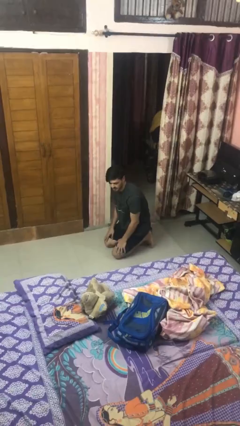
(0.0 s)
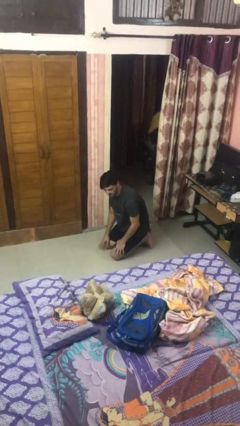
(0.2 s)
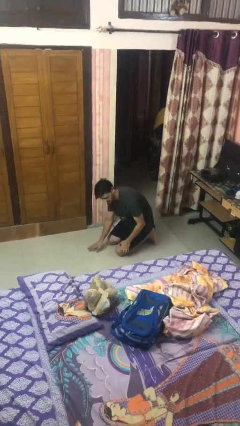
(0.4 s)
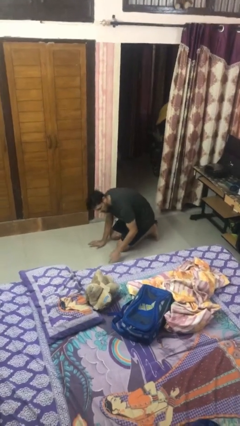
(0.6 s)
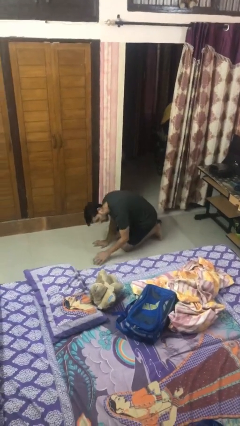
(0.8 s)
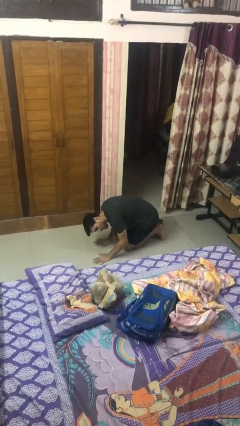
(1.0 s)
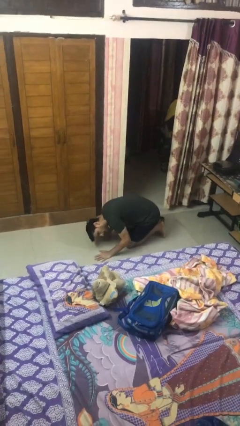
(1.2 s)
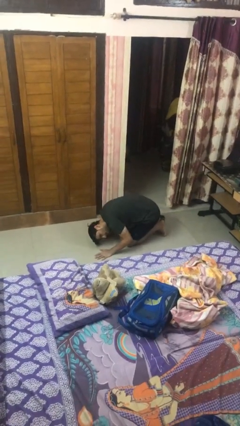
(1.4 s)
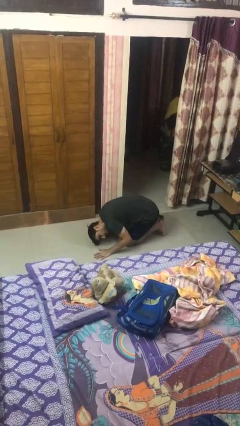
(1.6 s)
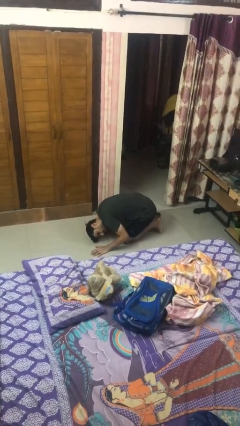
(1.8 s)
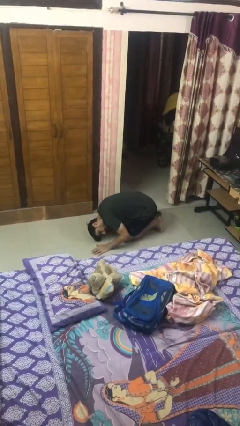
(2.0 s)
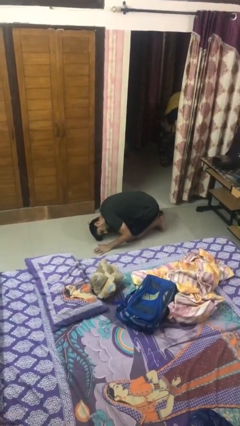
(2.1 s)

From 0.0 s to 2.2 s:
person searches under bed

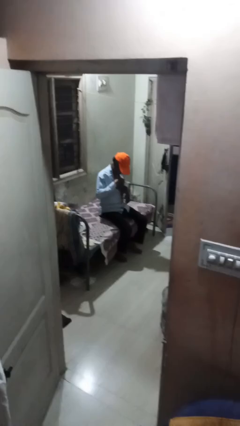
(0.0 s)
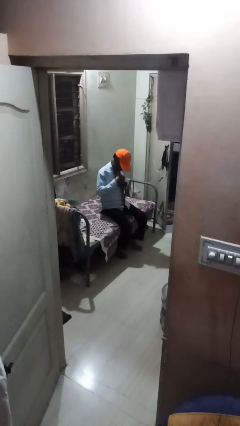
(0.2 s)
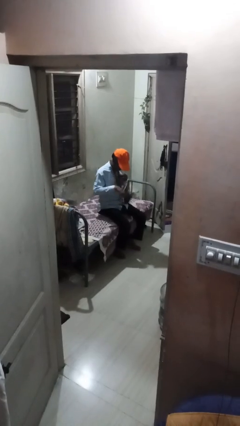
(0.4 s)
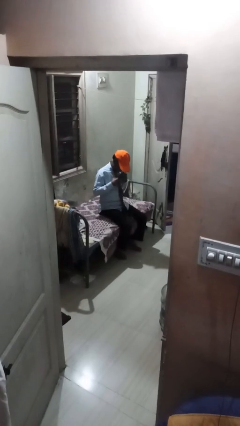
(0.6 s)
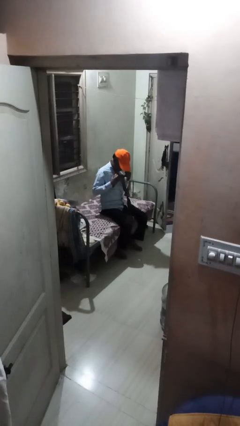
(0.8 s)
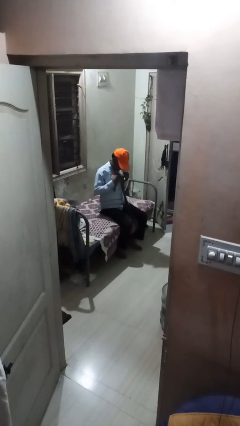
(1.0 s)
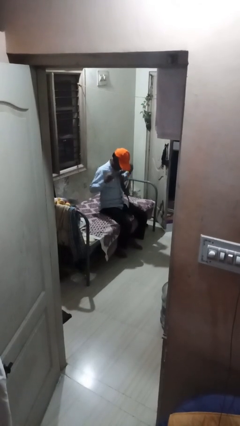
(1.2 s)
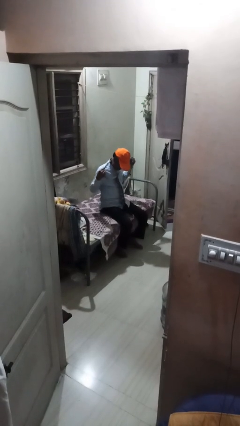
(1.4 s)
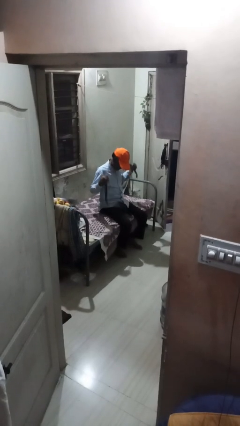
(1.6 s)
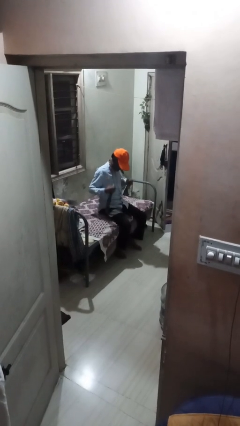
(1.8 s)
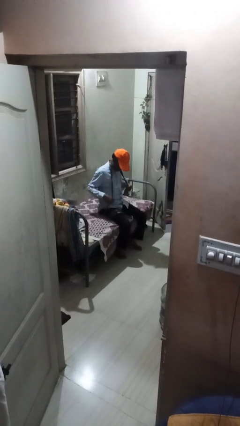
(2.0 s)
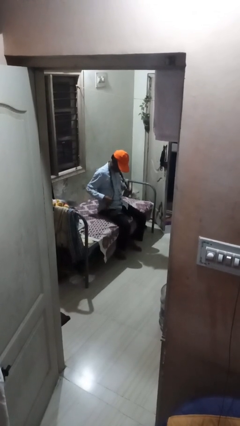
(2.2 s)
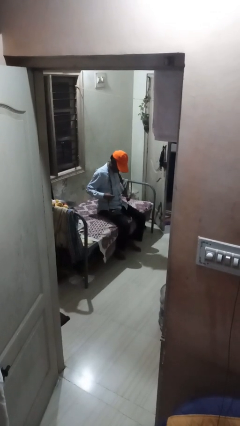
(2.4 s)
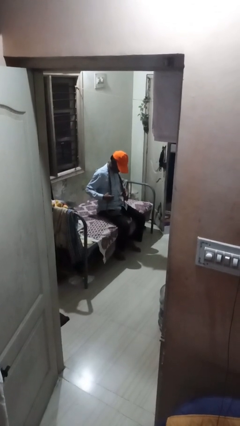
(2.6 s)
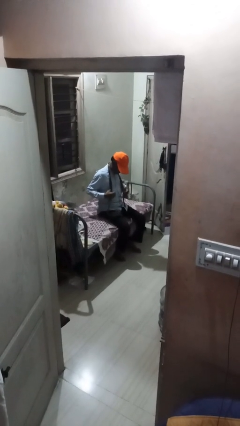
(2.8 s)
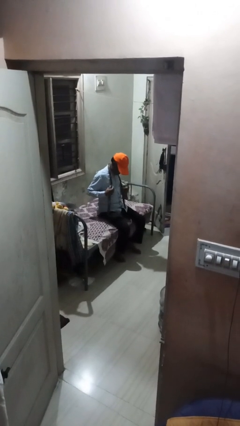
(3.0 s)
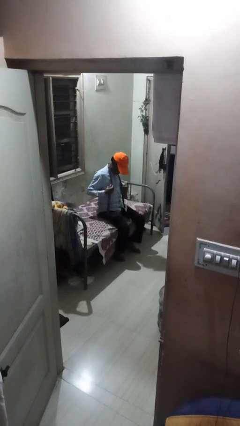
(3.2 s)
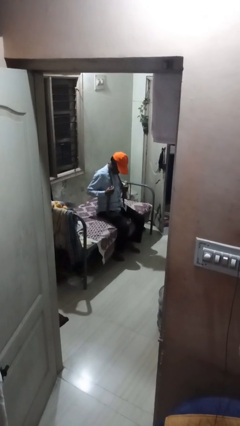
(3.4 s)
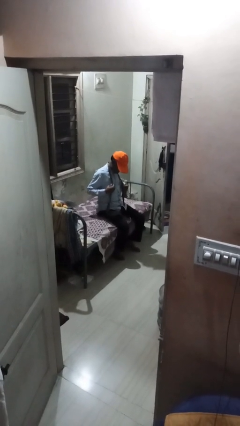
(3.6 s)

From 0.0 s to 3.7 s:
person takes off necktie

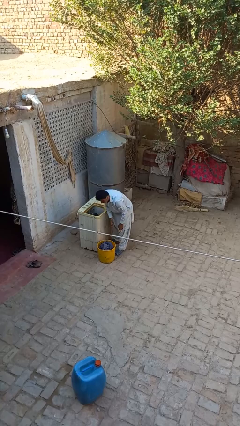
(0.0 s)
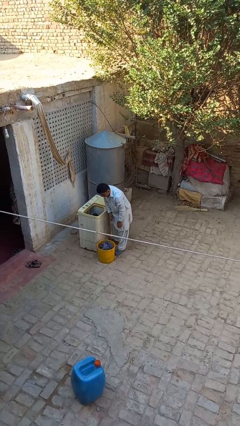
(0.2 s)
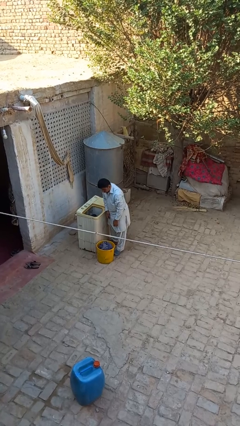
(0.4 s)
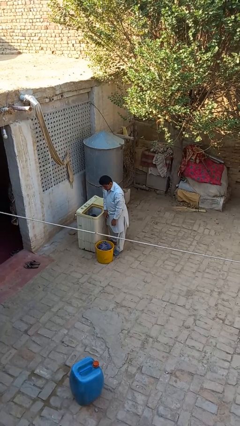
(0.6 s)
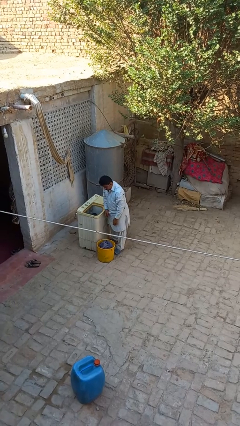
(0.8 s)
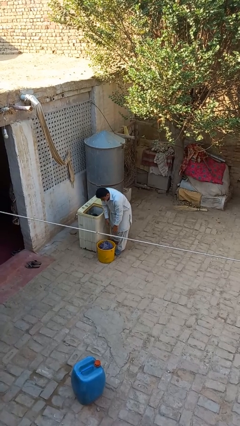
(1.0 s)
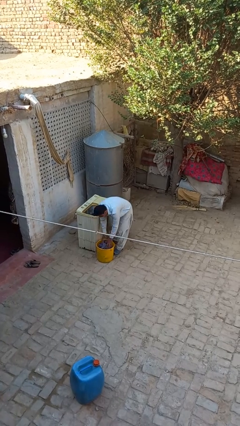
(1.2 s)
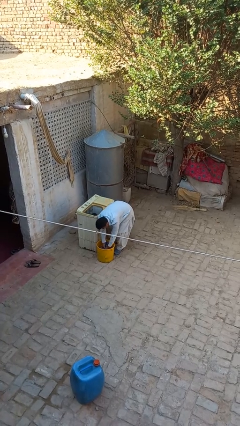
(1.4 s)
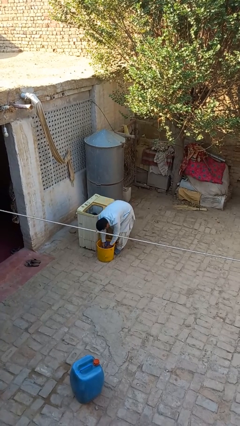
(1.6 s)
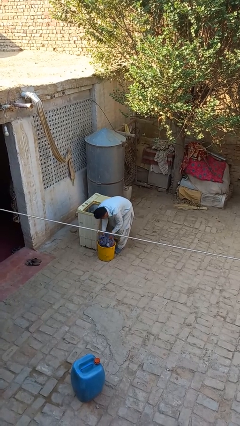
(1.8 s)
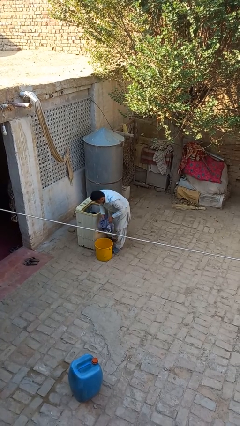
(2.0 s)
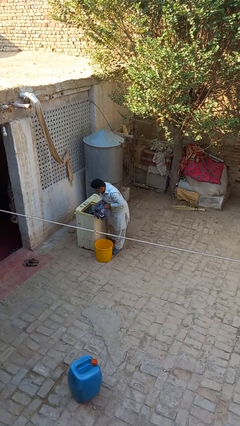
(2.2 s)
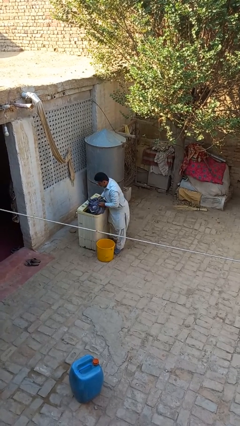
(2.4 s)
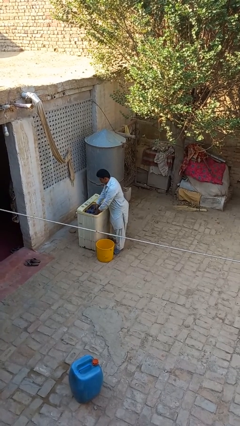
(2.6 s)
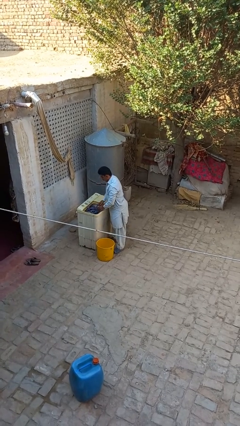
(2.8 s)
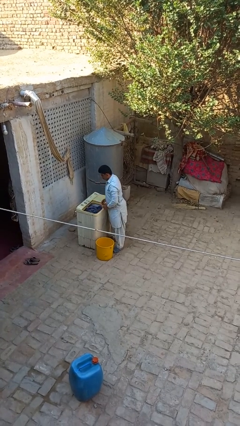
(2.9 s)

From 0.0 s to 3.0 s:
person loads clotheswasher

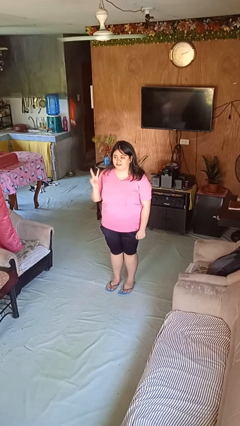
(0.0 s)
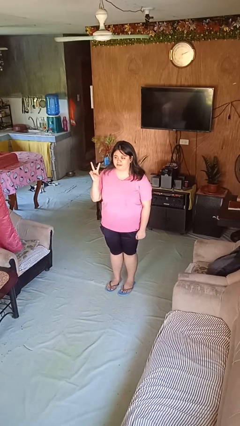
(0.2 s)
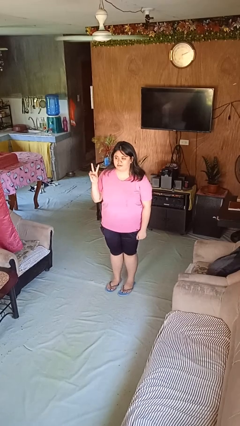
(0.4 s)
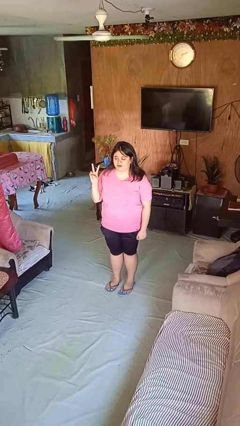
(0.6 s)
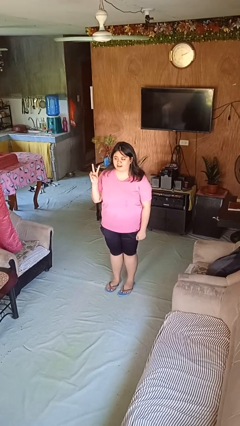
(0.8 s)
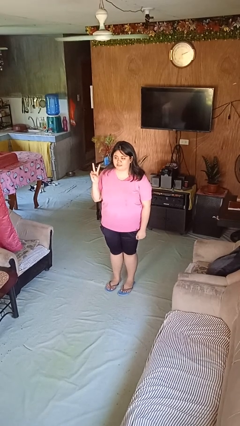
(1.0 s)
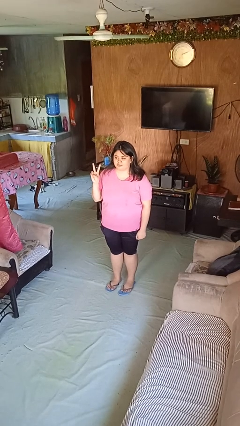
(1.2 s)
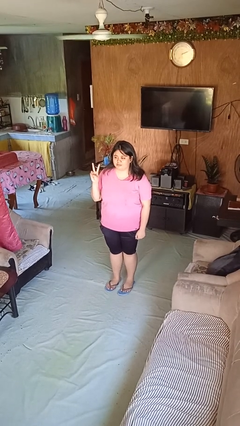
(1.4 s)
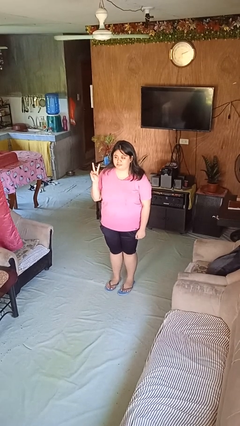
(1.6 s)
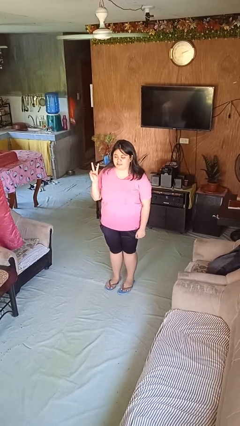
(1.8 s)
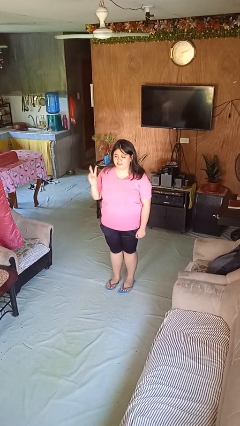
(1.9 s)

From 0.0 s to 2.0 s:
person gestures peace

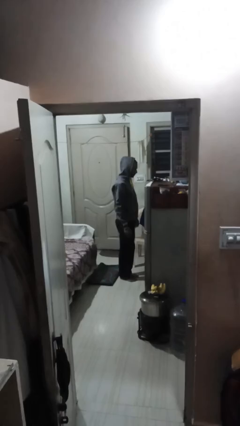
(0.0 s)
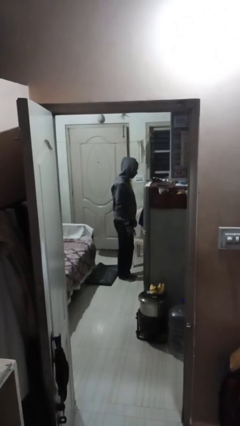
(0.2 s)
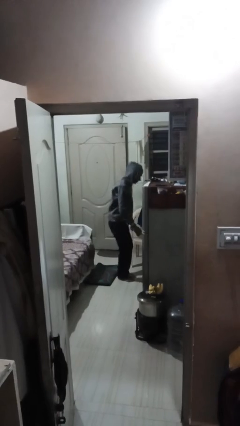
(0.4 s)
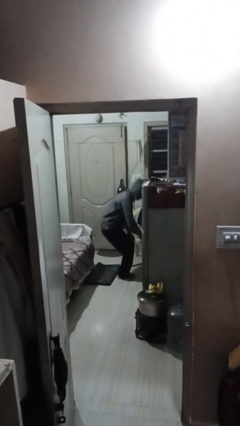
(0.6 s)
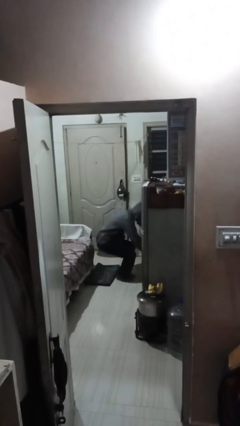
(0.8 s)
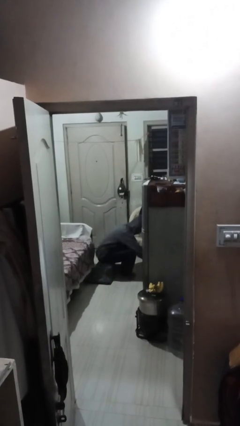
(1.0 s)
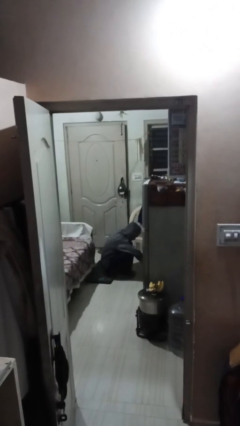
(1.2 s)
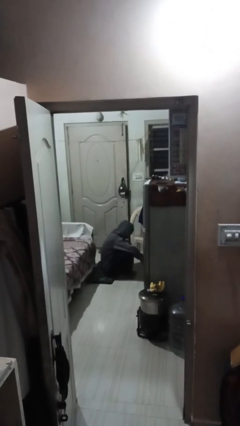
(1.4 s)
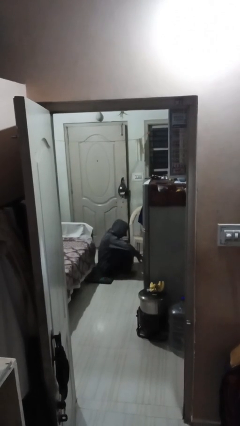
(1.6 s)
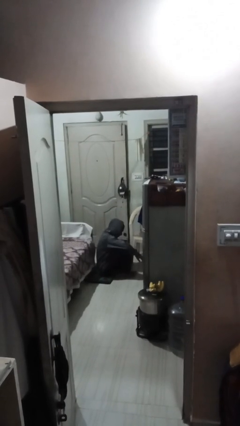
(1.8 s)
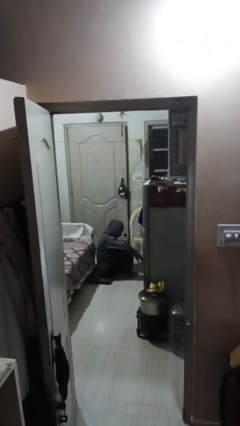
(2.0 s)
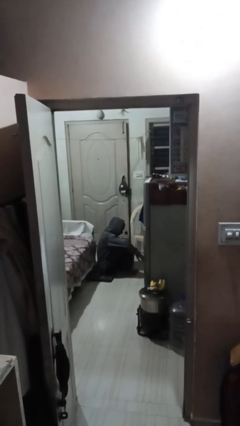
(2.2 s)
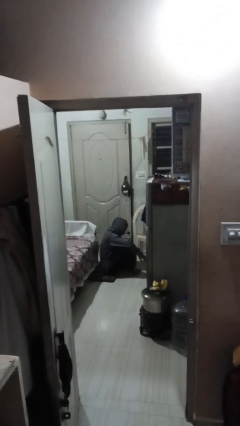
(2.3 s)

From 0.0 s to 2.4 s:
person sits down

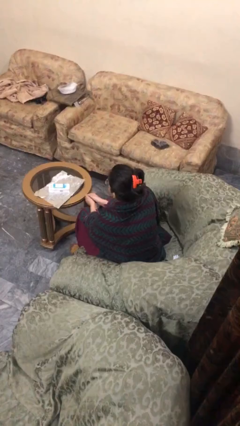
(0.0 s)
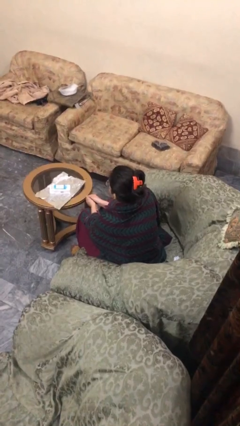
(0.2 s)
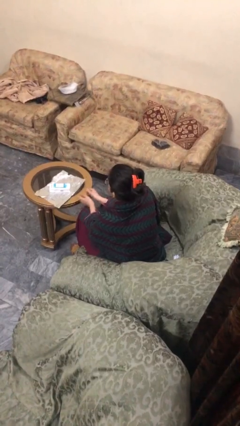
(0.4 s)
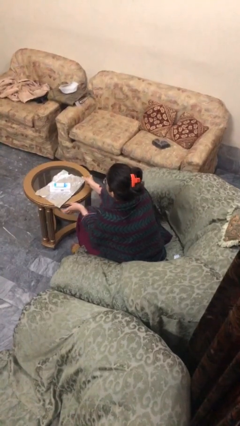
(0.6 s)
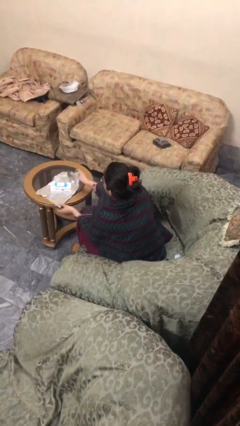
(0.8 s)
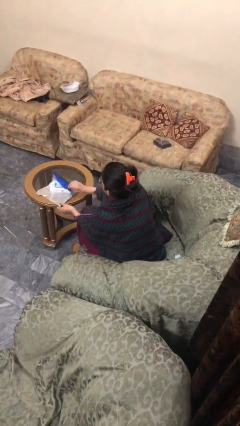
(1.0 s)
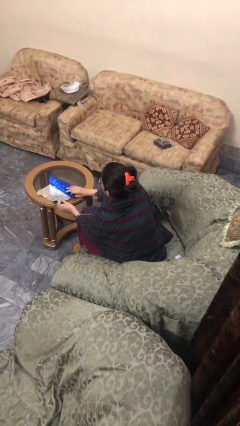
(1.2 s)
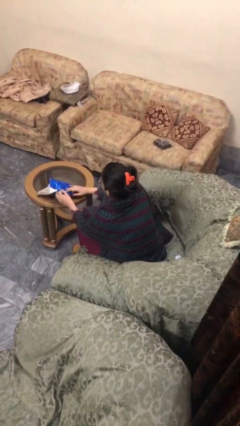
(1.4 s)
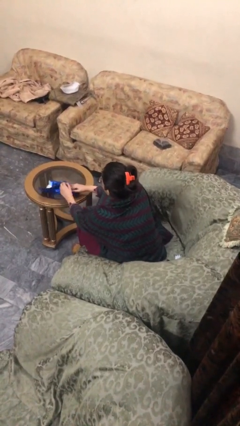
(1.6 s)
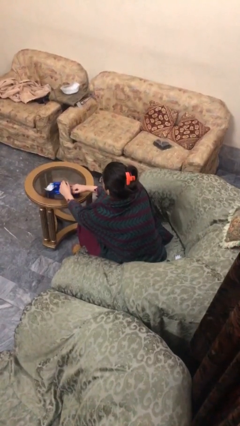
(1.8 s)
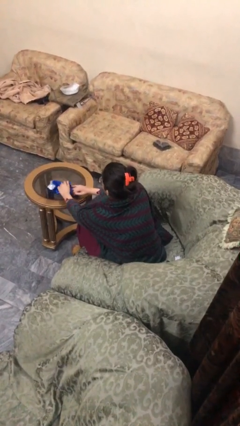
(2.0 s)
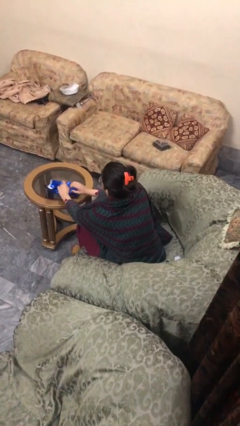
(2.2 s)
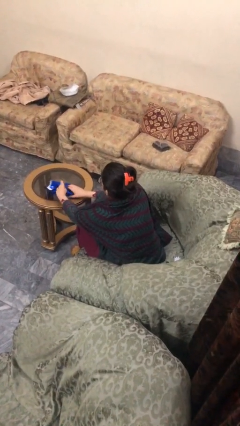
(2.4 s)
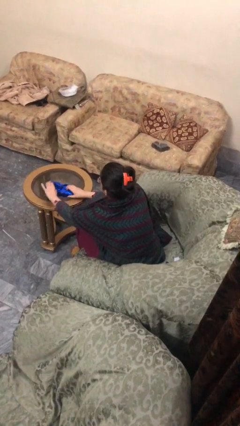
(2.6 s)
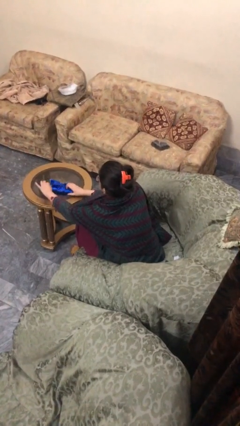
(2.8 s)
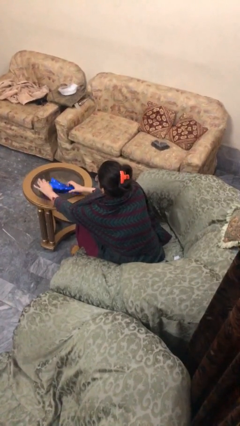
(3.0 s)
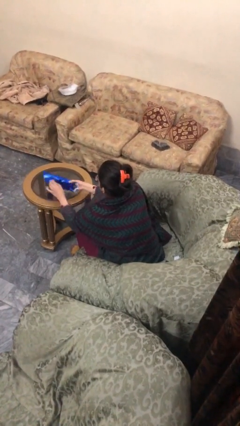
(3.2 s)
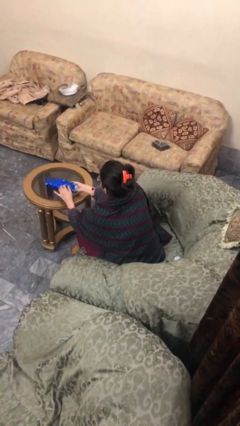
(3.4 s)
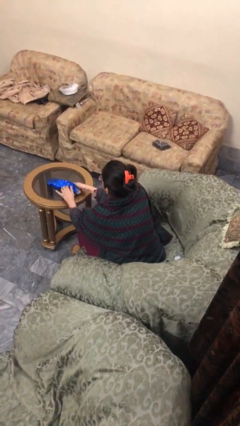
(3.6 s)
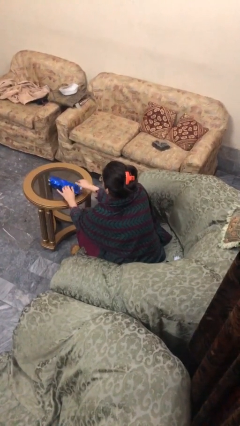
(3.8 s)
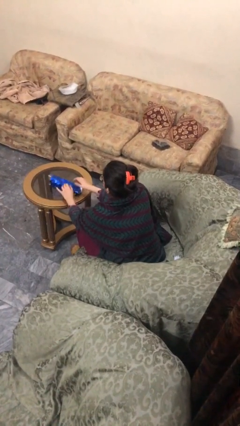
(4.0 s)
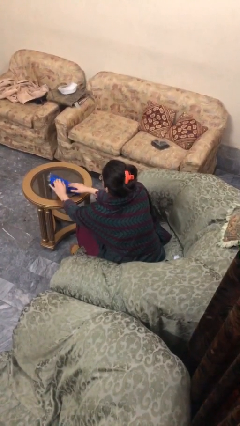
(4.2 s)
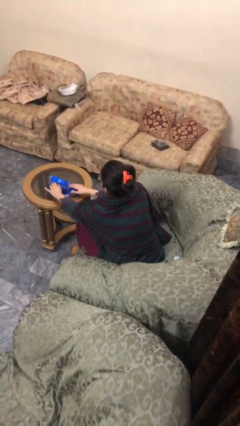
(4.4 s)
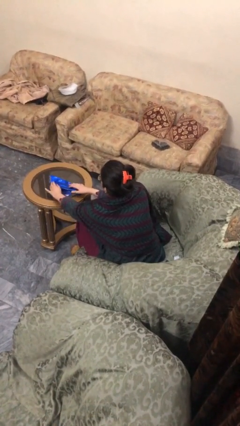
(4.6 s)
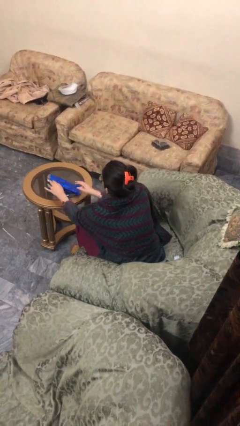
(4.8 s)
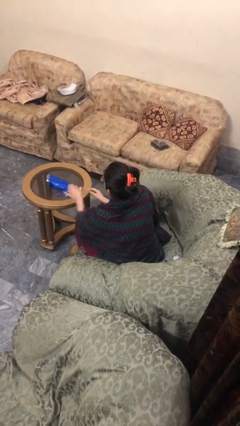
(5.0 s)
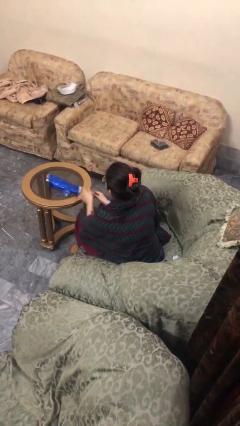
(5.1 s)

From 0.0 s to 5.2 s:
person wraps box
